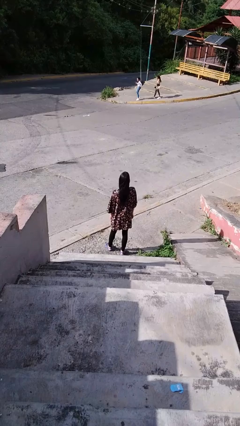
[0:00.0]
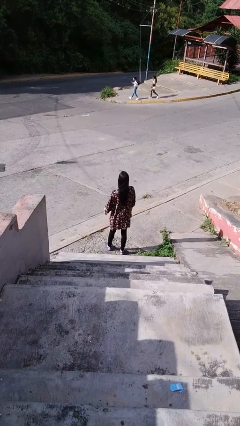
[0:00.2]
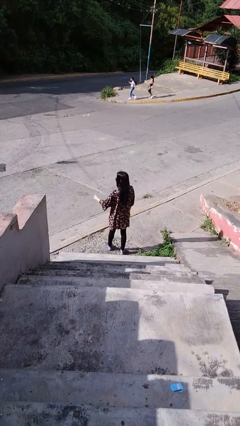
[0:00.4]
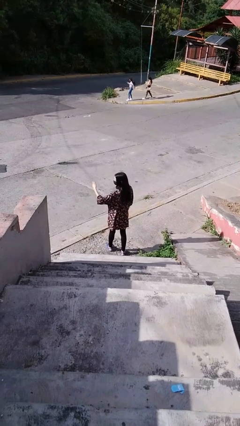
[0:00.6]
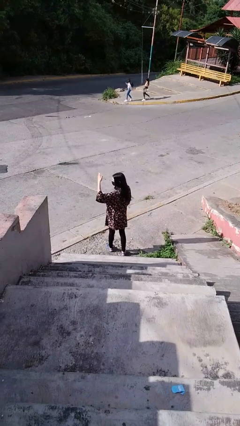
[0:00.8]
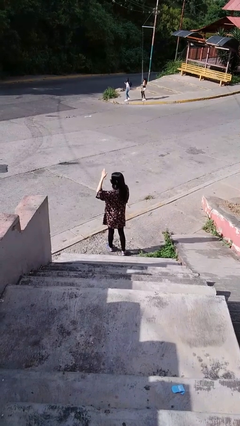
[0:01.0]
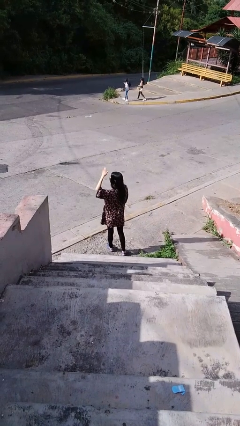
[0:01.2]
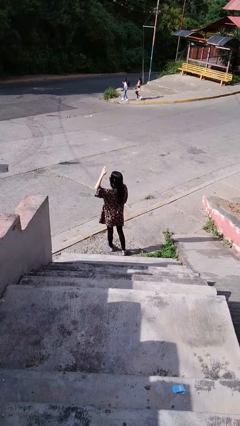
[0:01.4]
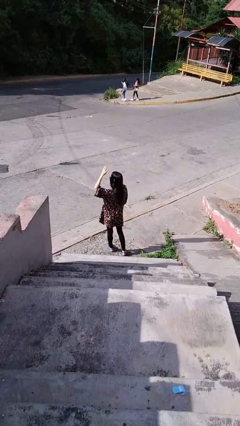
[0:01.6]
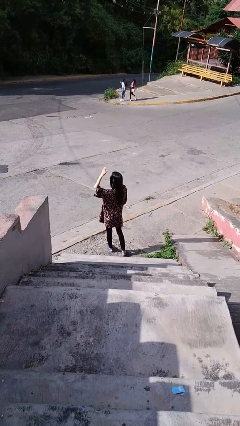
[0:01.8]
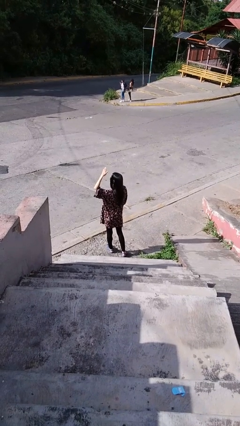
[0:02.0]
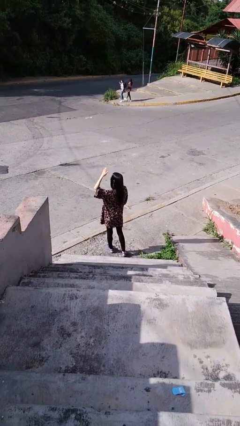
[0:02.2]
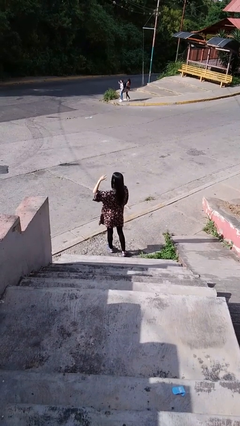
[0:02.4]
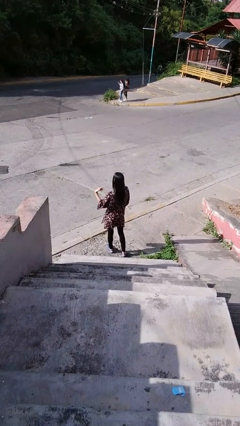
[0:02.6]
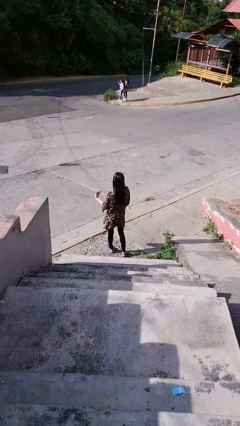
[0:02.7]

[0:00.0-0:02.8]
person shades eyes

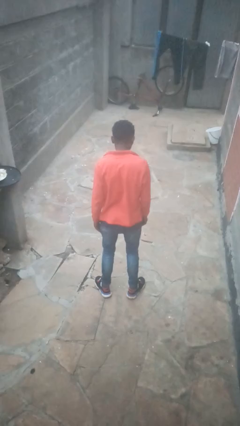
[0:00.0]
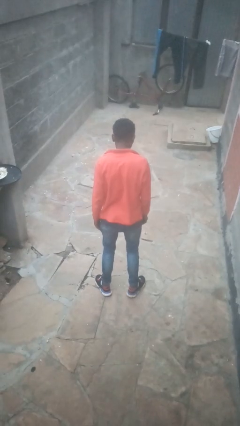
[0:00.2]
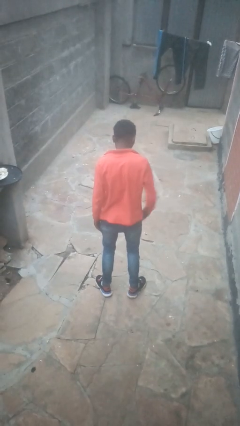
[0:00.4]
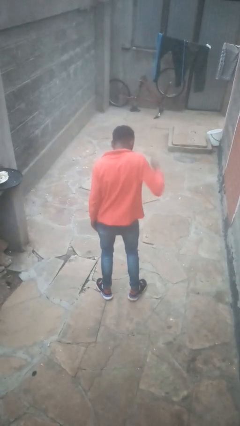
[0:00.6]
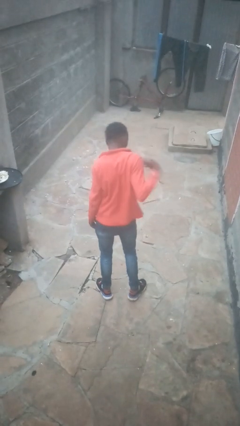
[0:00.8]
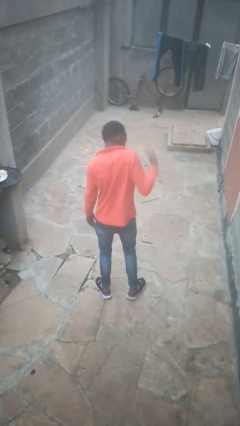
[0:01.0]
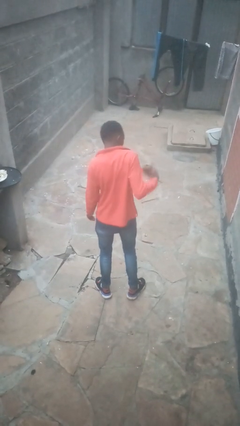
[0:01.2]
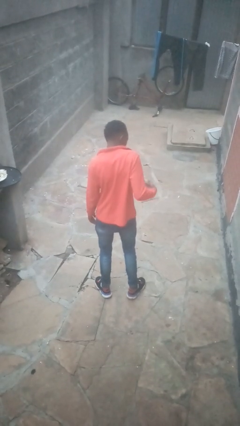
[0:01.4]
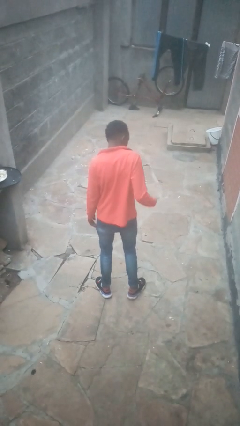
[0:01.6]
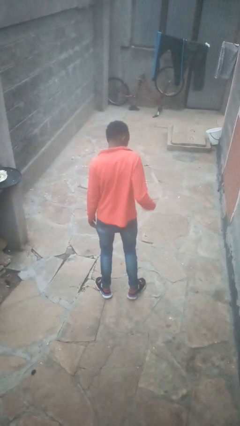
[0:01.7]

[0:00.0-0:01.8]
person swats bug

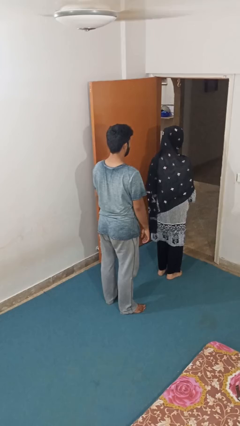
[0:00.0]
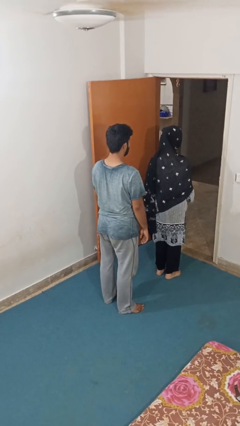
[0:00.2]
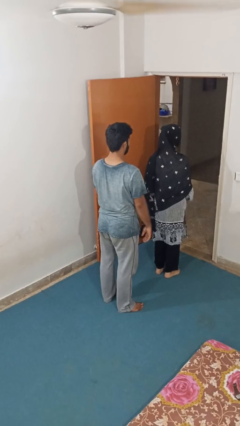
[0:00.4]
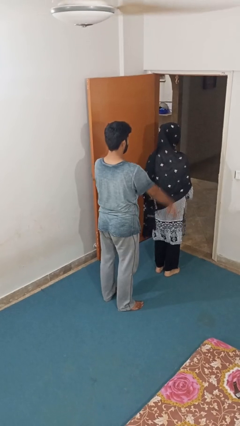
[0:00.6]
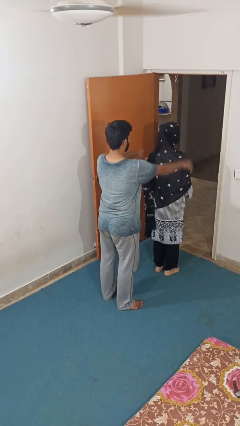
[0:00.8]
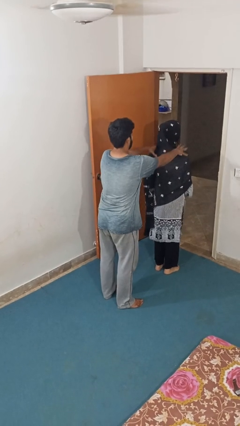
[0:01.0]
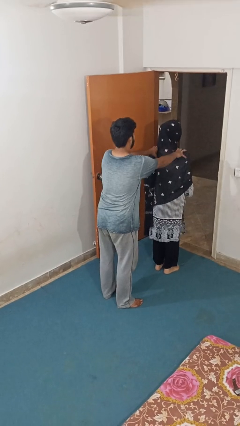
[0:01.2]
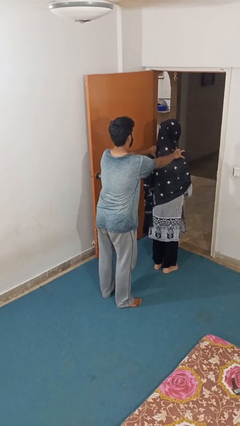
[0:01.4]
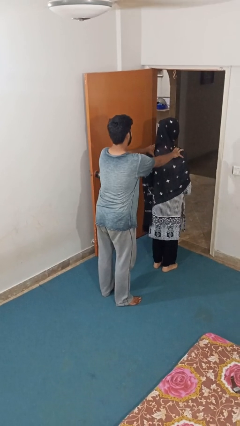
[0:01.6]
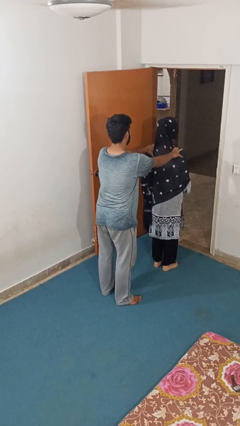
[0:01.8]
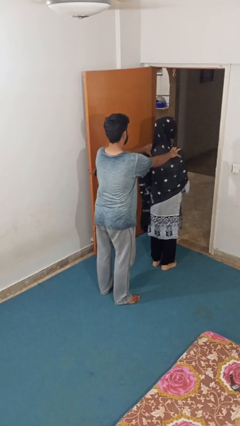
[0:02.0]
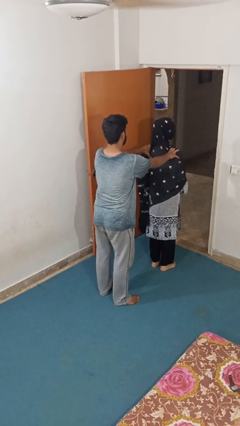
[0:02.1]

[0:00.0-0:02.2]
person grabs person by shoulder

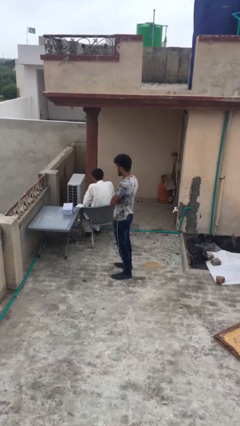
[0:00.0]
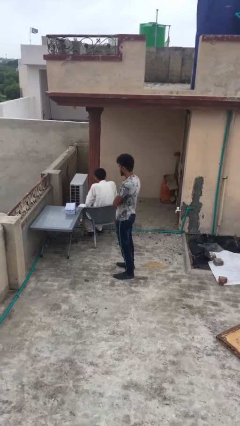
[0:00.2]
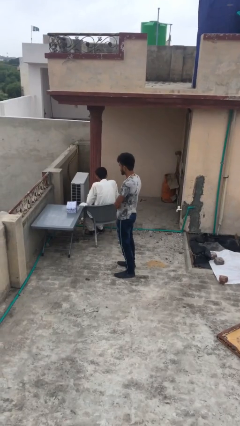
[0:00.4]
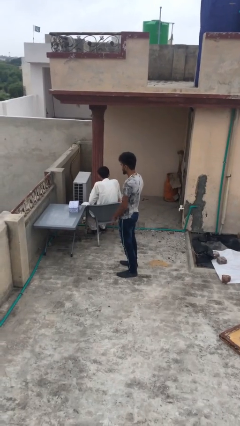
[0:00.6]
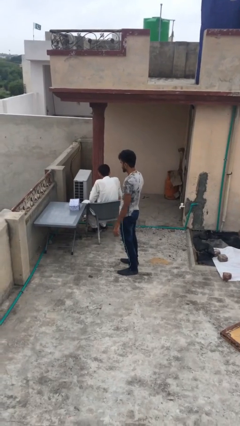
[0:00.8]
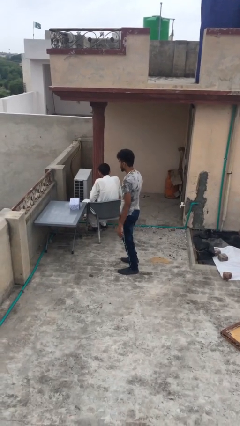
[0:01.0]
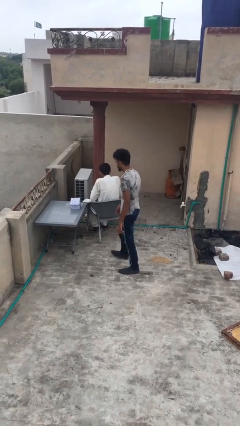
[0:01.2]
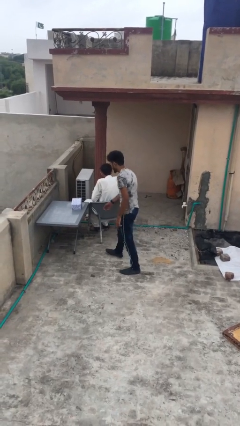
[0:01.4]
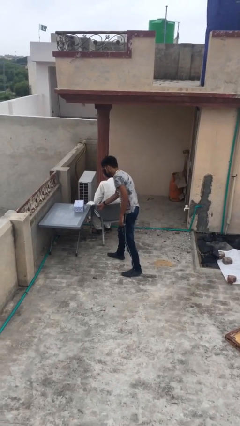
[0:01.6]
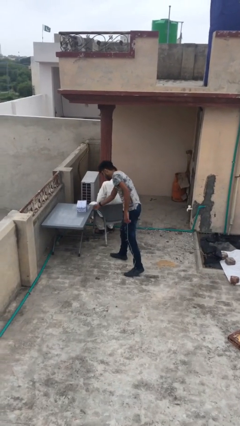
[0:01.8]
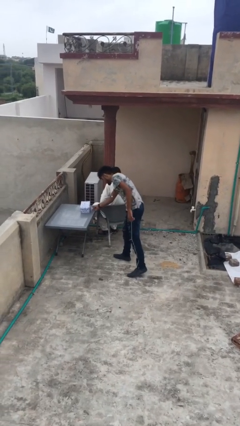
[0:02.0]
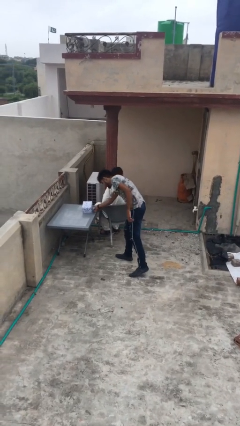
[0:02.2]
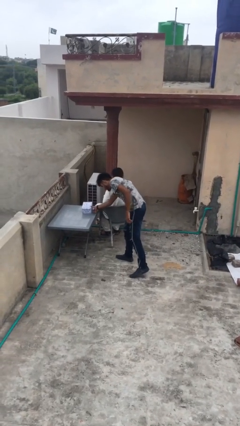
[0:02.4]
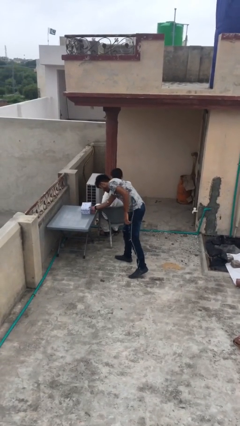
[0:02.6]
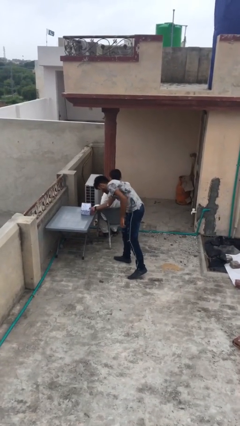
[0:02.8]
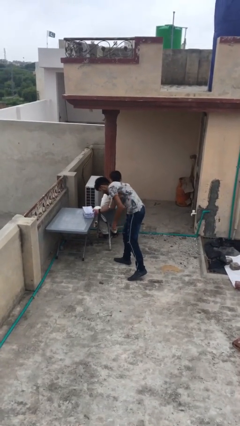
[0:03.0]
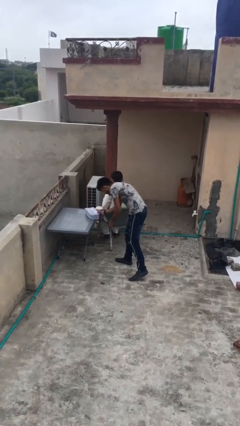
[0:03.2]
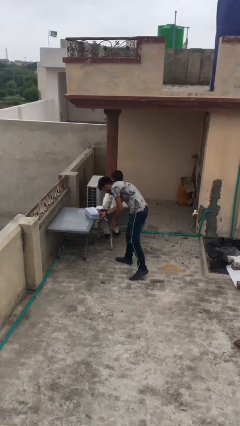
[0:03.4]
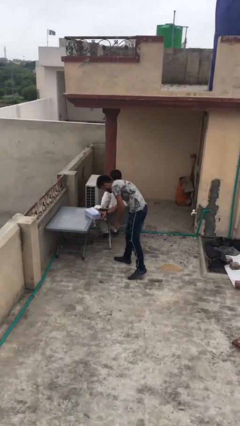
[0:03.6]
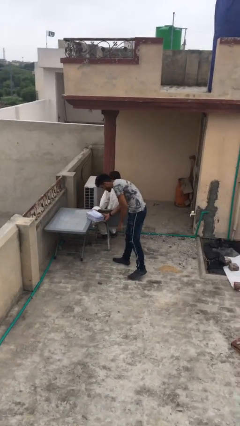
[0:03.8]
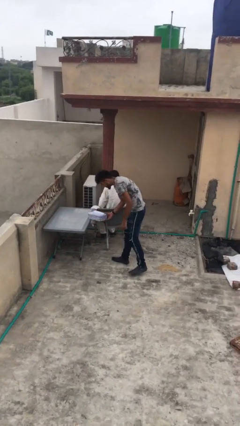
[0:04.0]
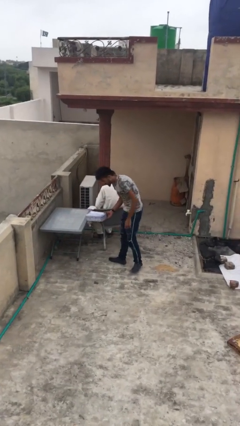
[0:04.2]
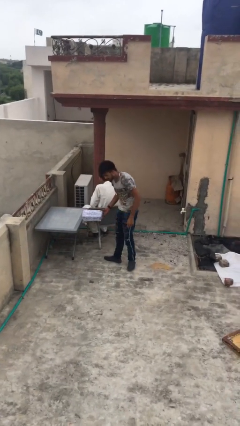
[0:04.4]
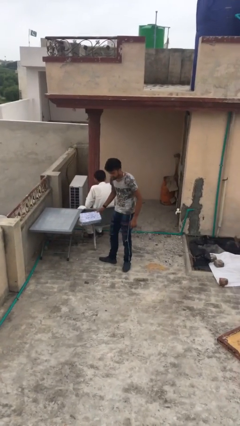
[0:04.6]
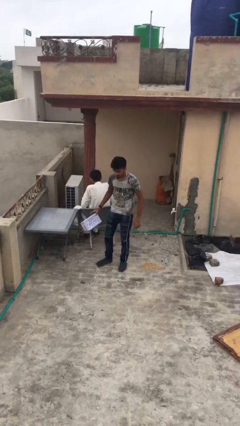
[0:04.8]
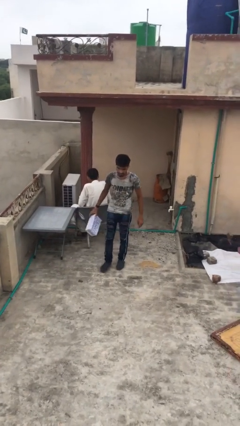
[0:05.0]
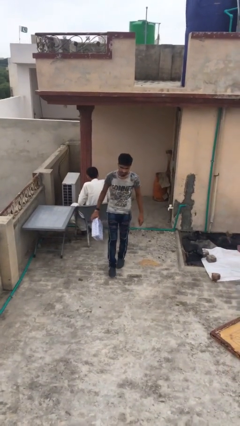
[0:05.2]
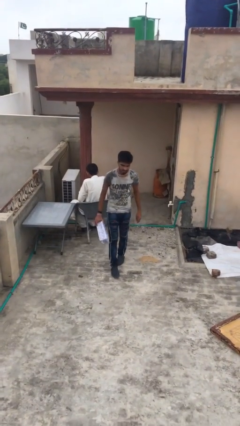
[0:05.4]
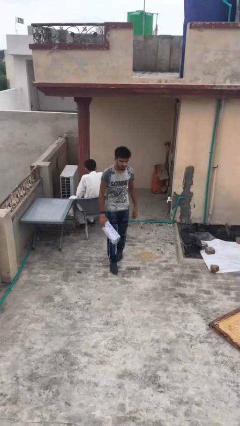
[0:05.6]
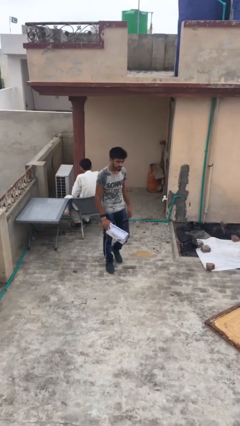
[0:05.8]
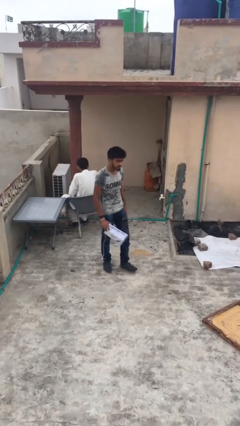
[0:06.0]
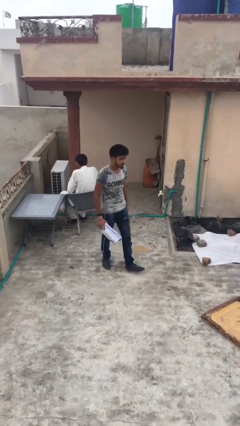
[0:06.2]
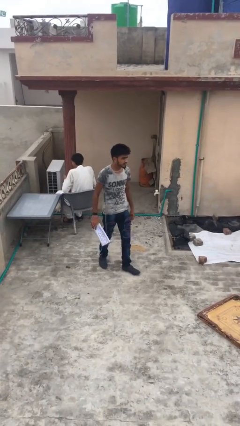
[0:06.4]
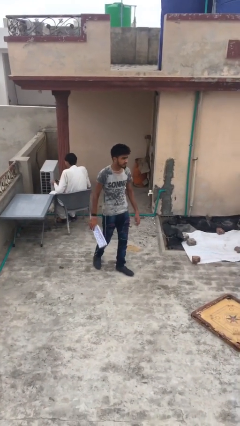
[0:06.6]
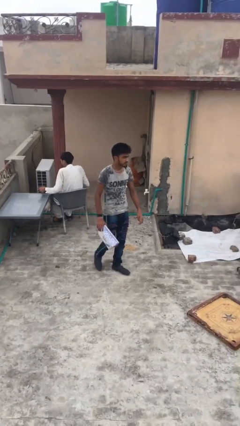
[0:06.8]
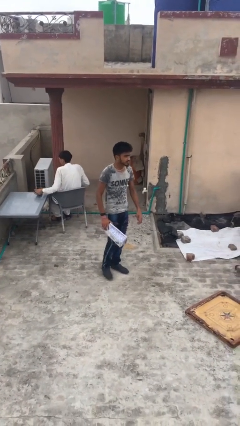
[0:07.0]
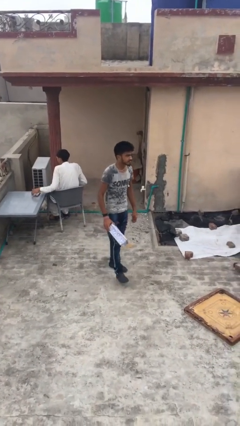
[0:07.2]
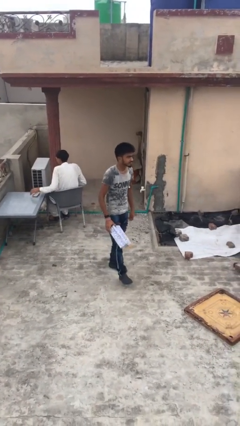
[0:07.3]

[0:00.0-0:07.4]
person steals object from person

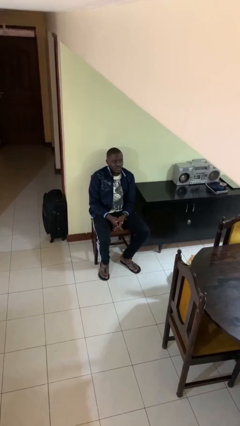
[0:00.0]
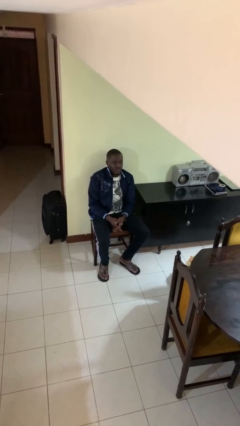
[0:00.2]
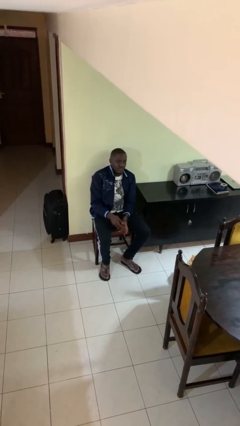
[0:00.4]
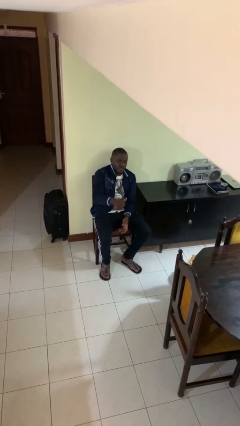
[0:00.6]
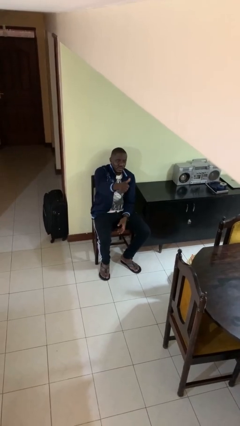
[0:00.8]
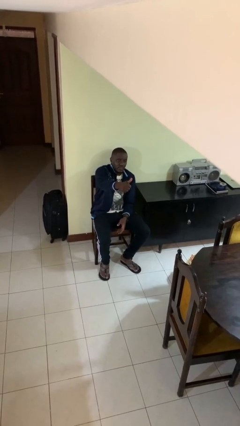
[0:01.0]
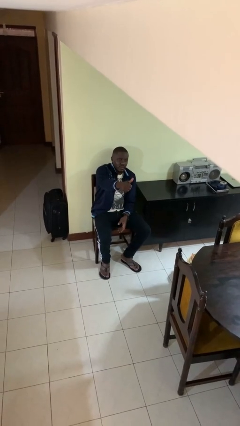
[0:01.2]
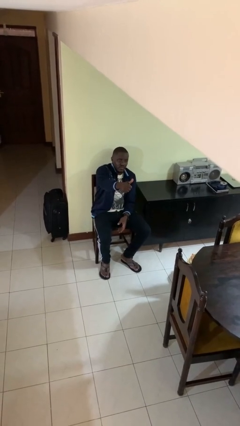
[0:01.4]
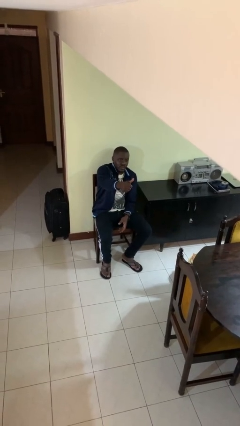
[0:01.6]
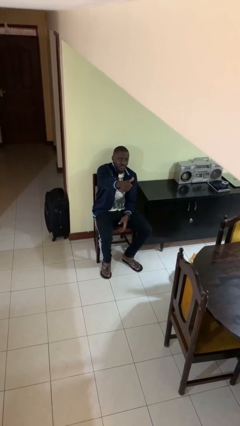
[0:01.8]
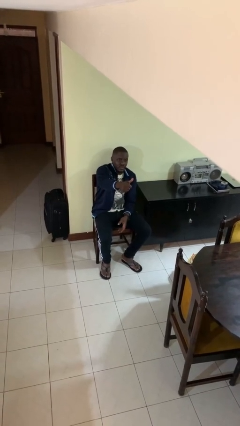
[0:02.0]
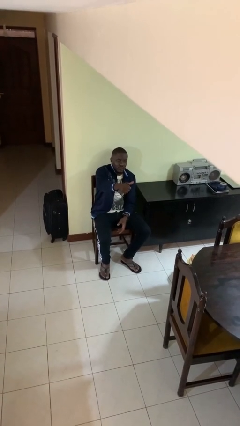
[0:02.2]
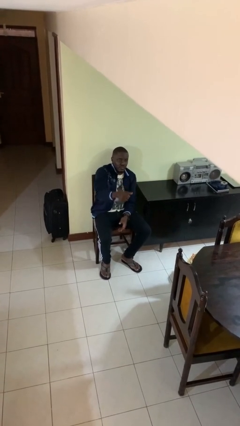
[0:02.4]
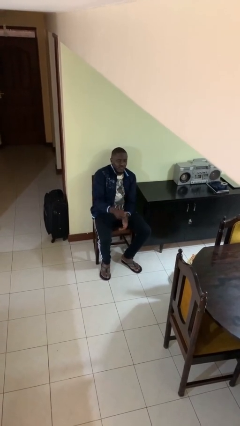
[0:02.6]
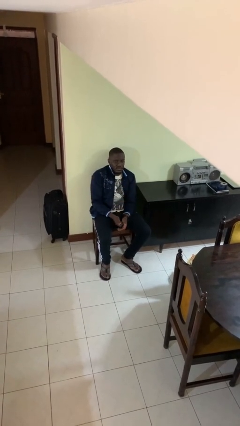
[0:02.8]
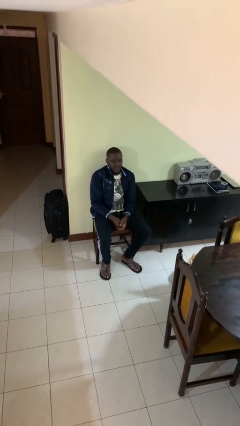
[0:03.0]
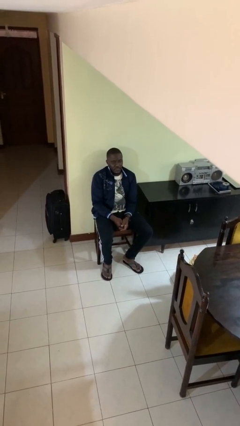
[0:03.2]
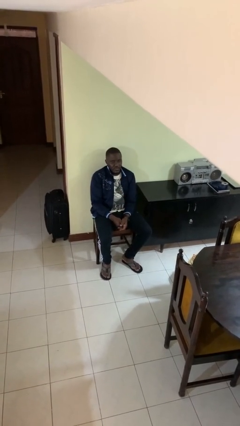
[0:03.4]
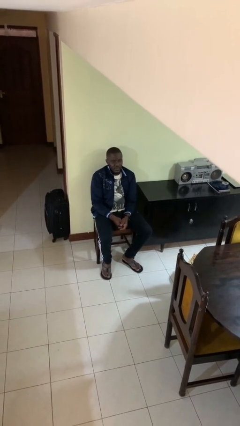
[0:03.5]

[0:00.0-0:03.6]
person gestures thumbs up
